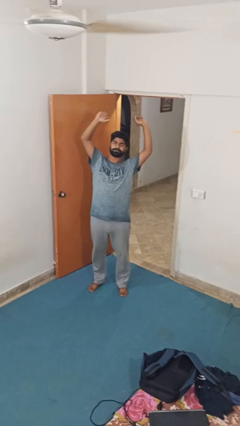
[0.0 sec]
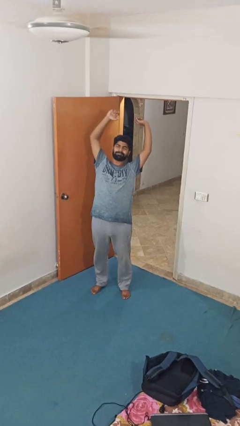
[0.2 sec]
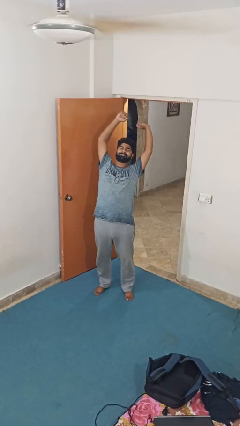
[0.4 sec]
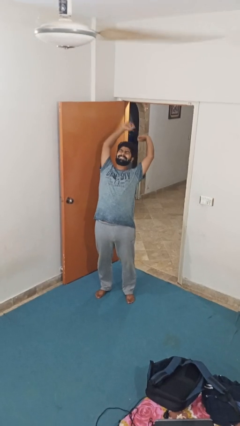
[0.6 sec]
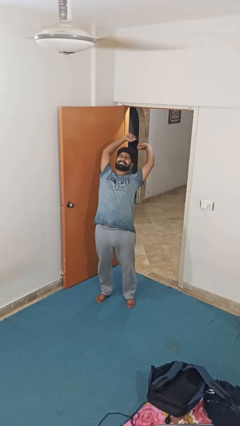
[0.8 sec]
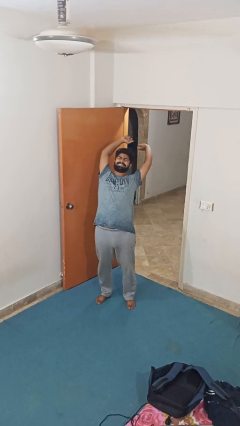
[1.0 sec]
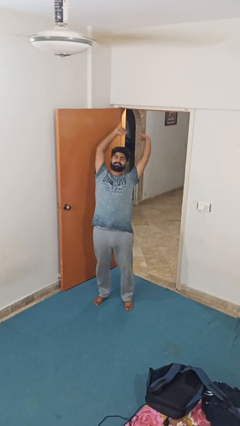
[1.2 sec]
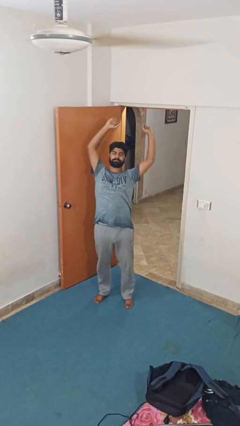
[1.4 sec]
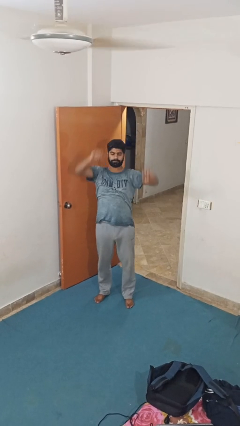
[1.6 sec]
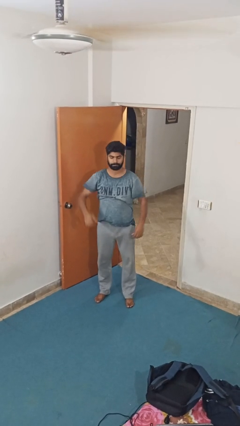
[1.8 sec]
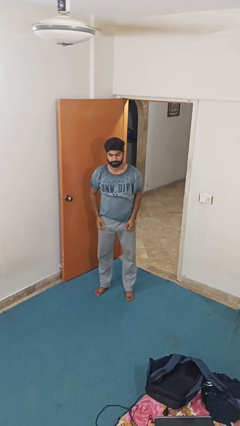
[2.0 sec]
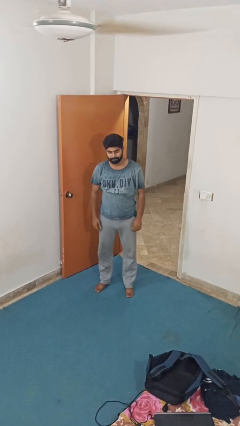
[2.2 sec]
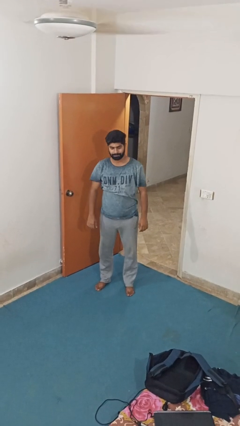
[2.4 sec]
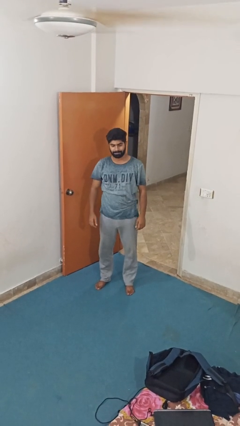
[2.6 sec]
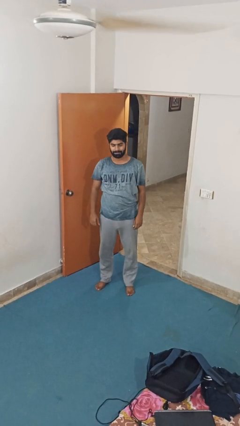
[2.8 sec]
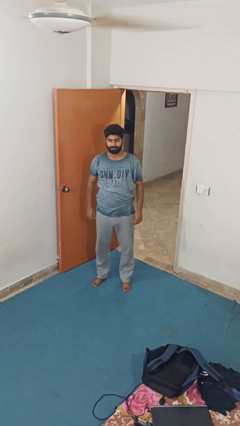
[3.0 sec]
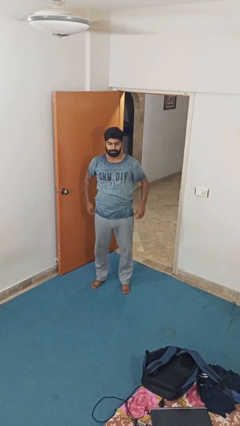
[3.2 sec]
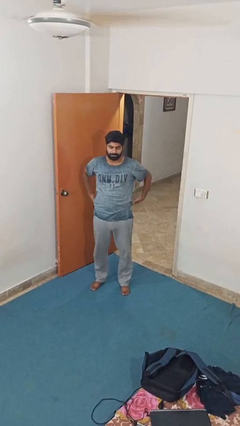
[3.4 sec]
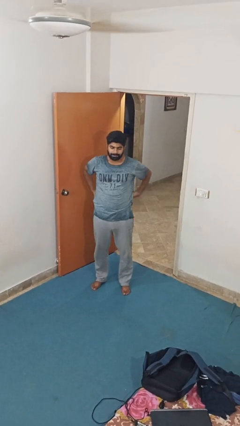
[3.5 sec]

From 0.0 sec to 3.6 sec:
person stretches arms over head

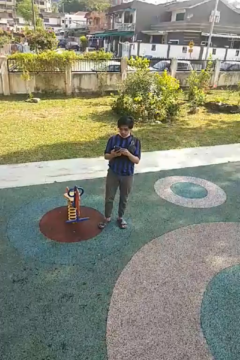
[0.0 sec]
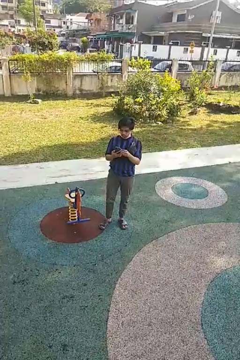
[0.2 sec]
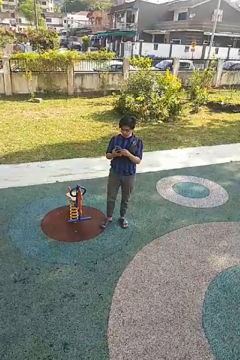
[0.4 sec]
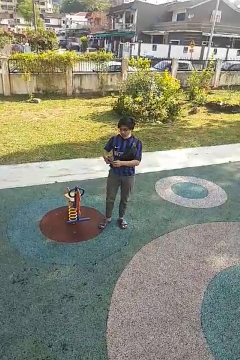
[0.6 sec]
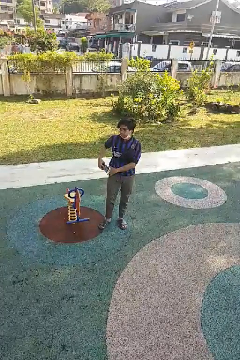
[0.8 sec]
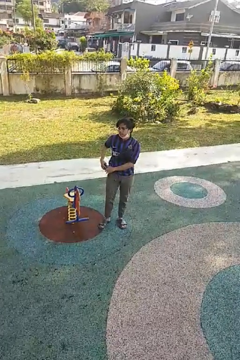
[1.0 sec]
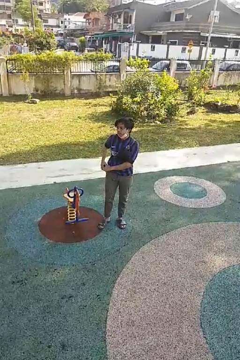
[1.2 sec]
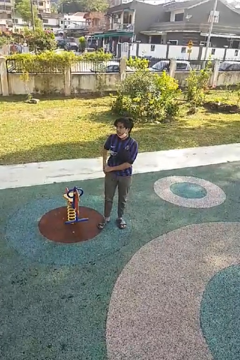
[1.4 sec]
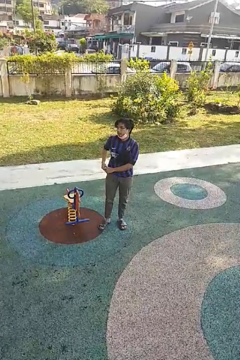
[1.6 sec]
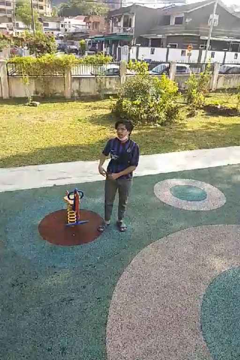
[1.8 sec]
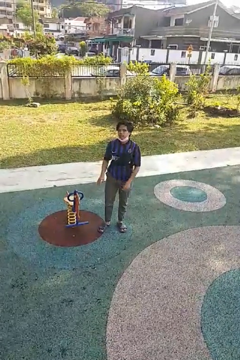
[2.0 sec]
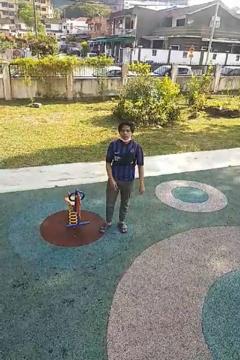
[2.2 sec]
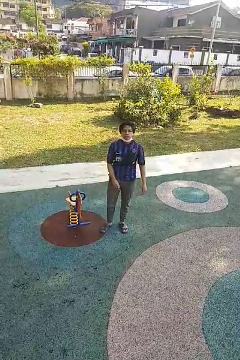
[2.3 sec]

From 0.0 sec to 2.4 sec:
person puts phone into pocket

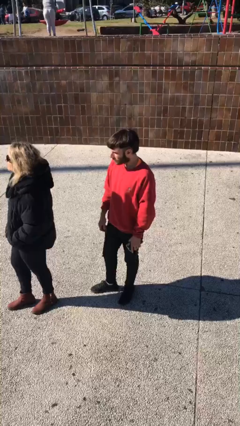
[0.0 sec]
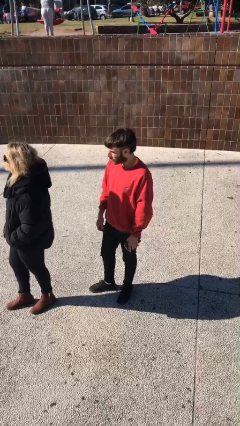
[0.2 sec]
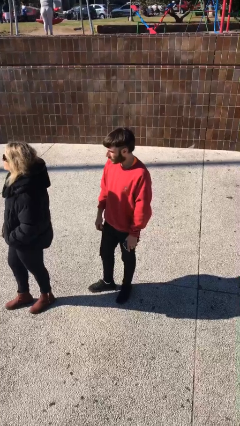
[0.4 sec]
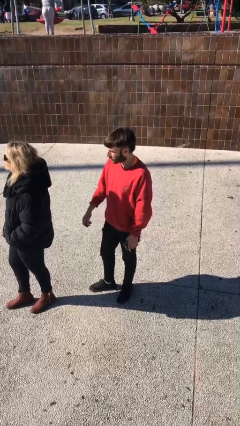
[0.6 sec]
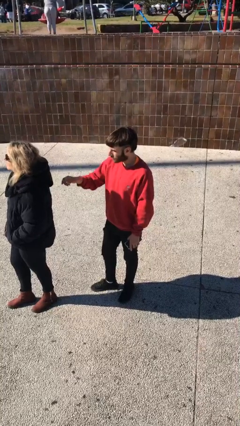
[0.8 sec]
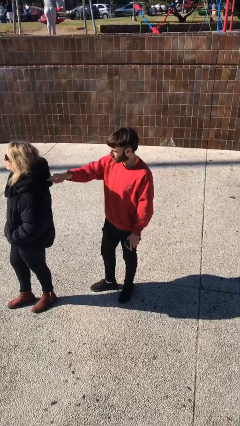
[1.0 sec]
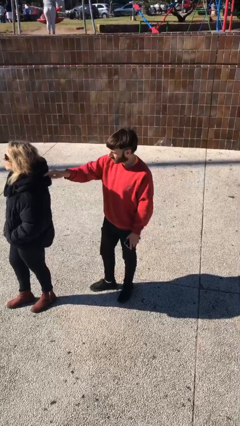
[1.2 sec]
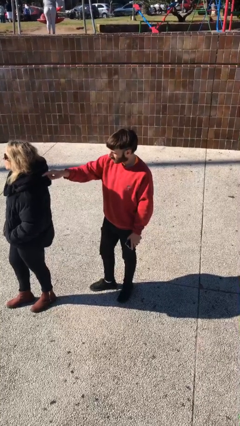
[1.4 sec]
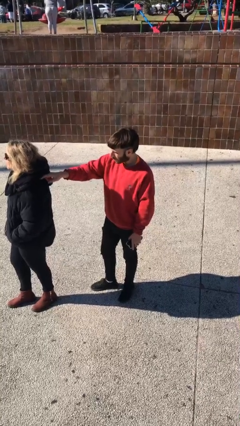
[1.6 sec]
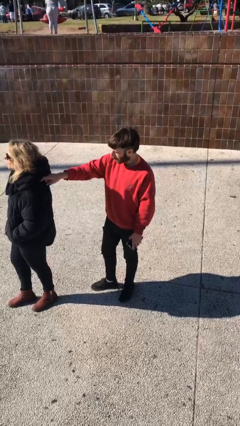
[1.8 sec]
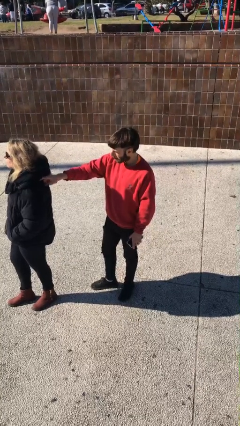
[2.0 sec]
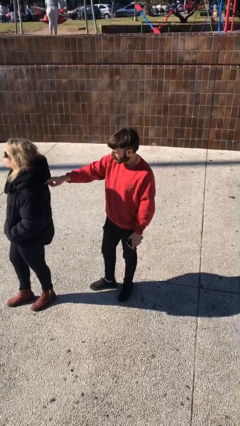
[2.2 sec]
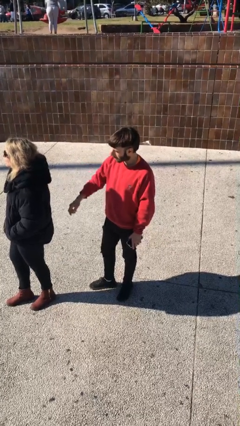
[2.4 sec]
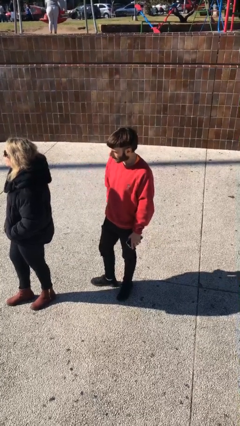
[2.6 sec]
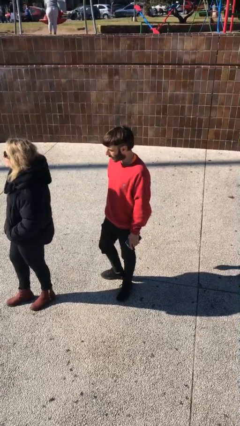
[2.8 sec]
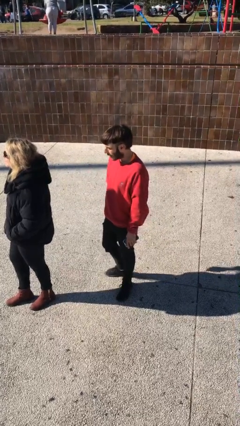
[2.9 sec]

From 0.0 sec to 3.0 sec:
person touches back of person

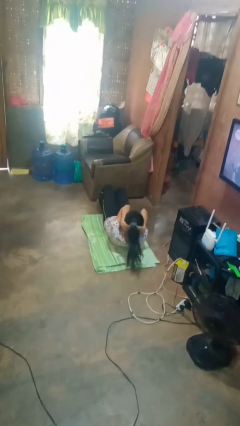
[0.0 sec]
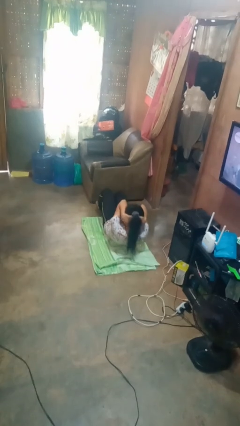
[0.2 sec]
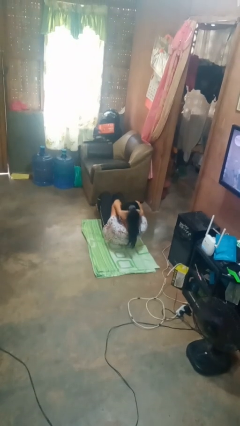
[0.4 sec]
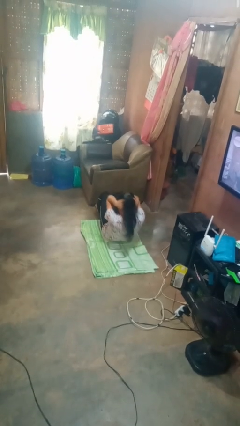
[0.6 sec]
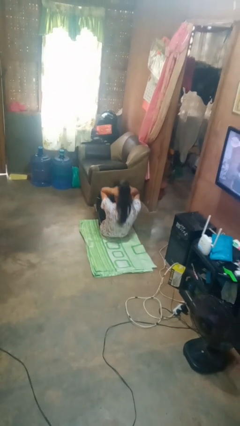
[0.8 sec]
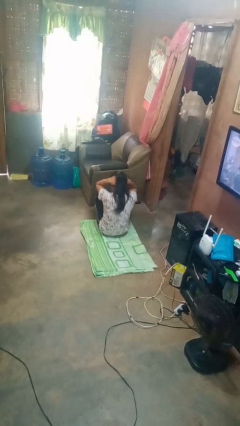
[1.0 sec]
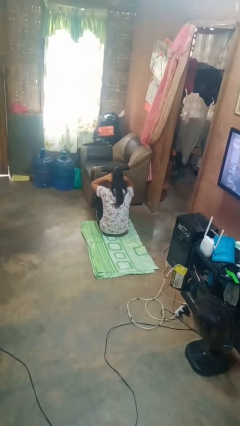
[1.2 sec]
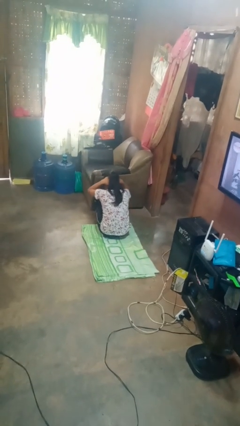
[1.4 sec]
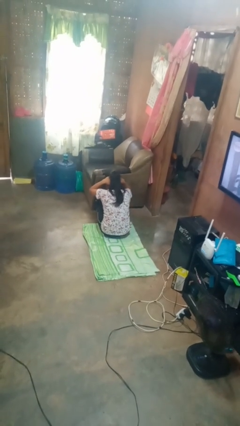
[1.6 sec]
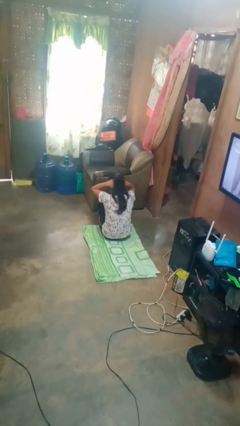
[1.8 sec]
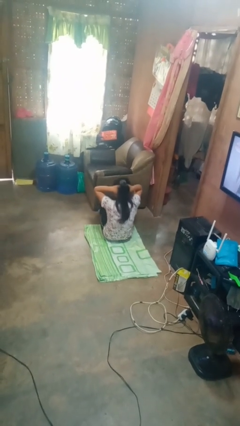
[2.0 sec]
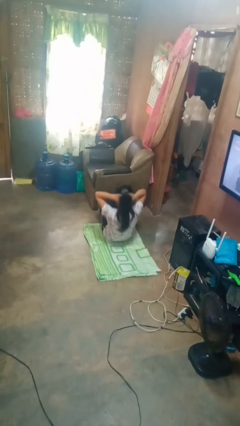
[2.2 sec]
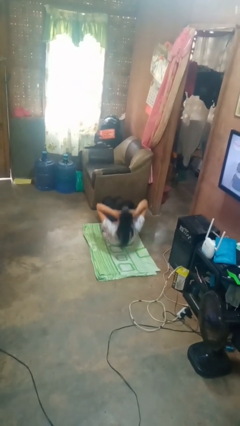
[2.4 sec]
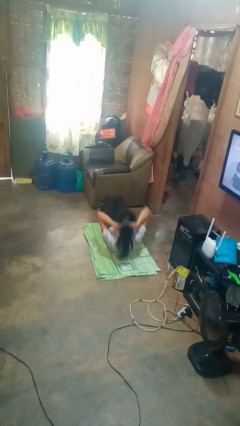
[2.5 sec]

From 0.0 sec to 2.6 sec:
person exercises with situp

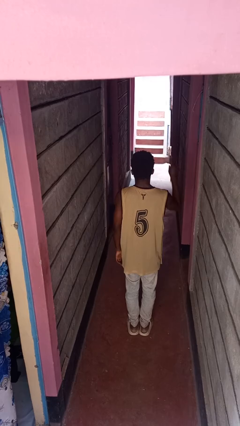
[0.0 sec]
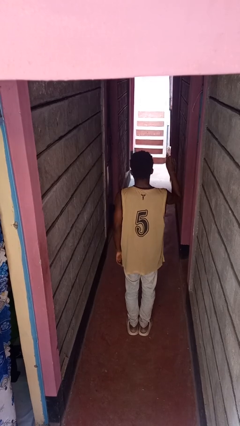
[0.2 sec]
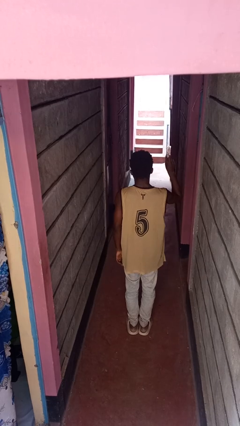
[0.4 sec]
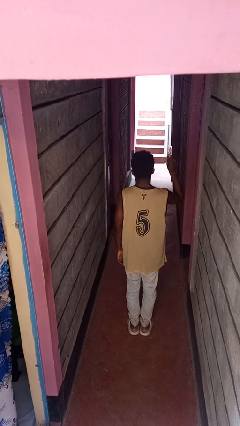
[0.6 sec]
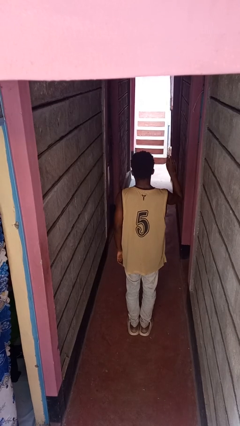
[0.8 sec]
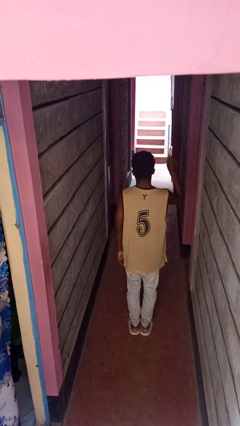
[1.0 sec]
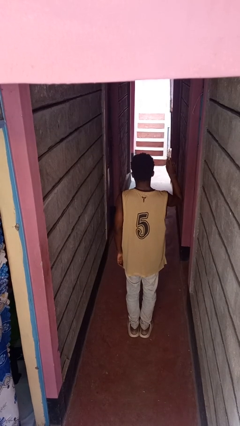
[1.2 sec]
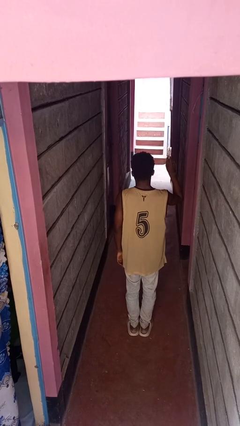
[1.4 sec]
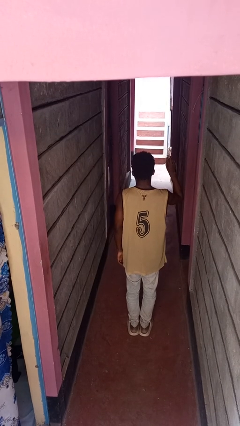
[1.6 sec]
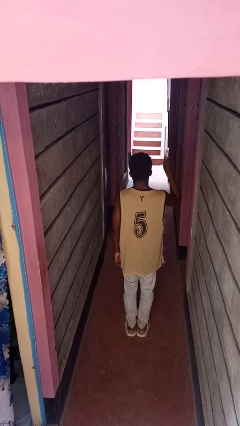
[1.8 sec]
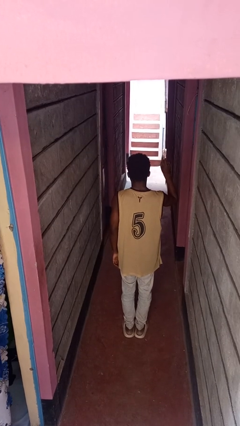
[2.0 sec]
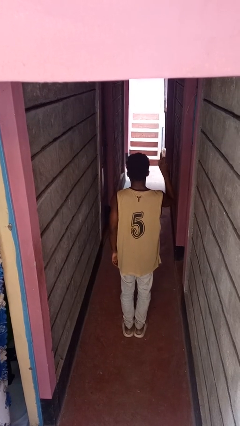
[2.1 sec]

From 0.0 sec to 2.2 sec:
person gestures number one

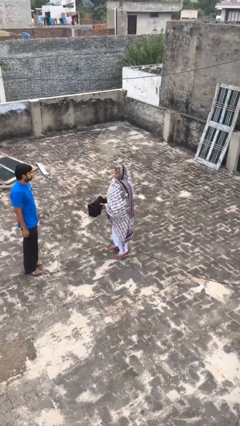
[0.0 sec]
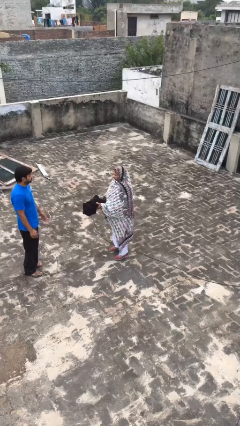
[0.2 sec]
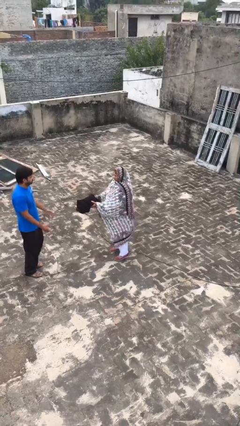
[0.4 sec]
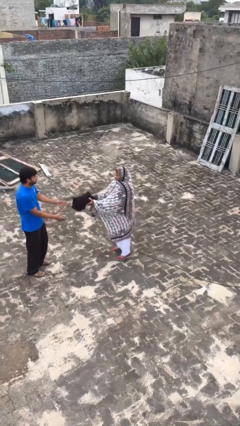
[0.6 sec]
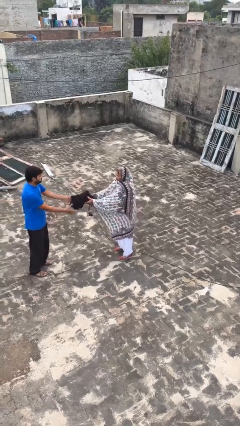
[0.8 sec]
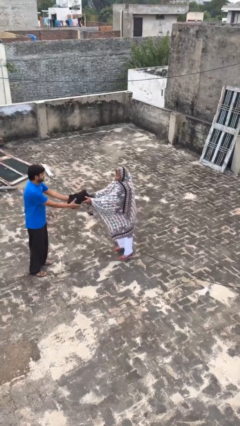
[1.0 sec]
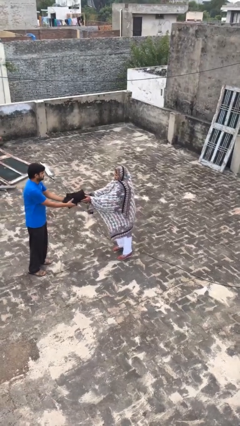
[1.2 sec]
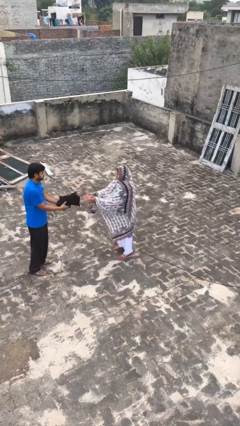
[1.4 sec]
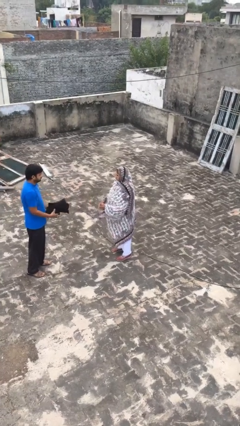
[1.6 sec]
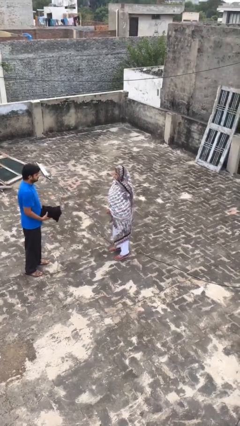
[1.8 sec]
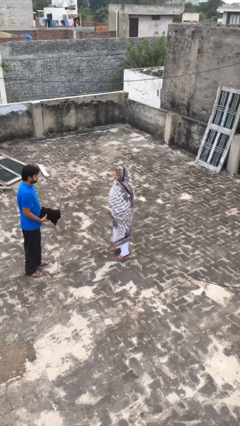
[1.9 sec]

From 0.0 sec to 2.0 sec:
person transfers object to person

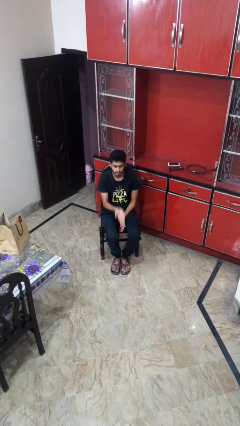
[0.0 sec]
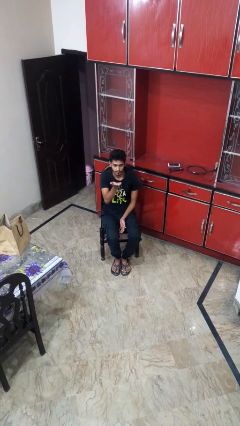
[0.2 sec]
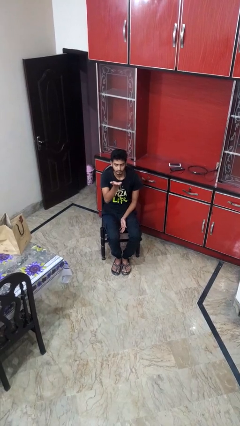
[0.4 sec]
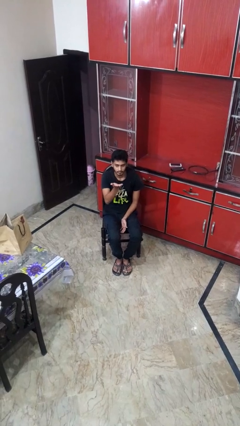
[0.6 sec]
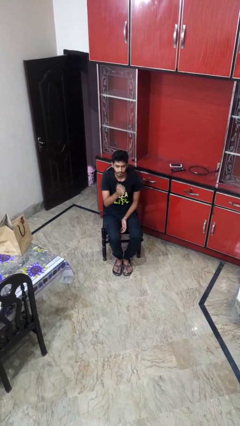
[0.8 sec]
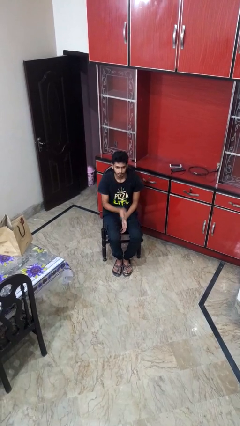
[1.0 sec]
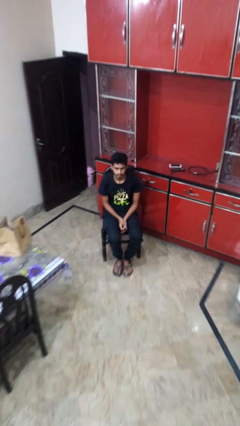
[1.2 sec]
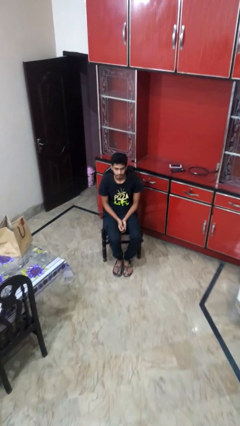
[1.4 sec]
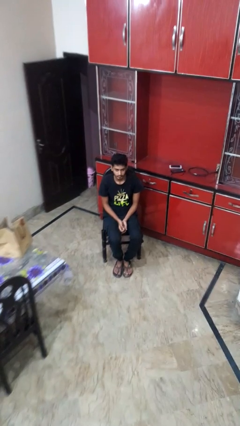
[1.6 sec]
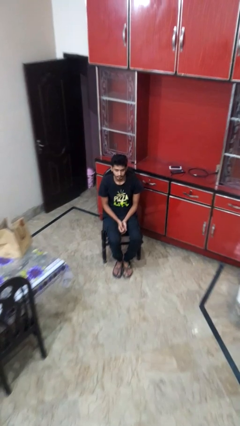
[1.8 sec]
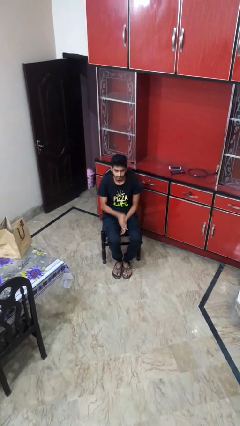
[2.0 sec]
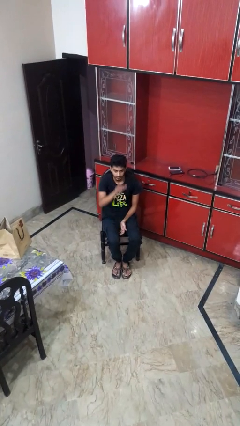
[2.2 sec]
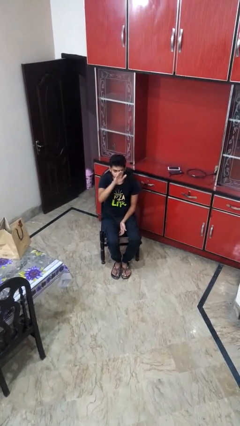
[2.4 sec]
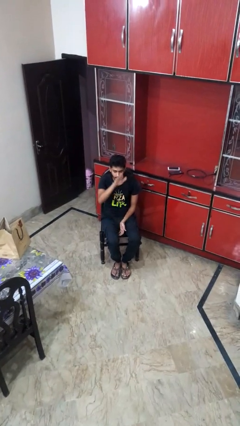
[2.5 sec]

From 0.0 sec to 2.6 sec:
person gestures swipe up
